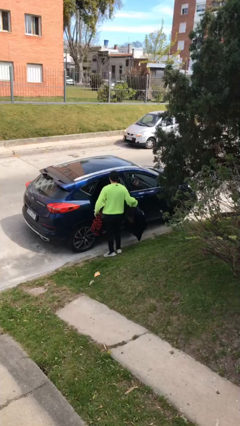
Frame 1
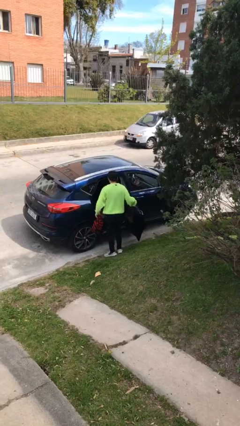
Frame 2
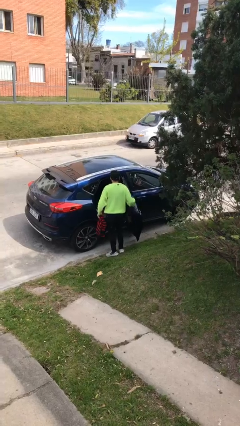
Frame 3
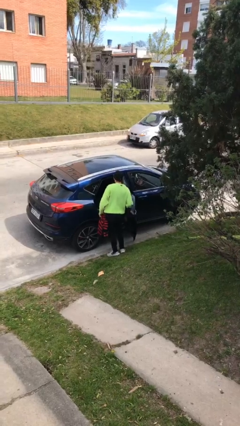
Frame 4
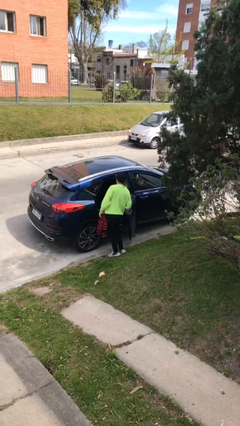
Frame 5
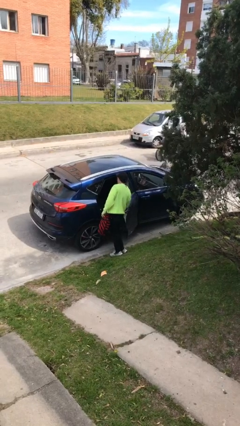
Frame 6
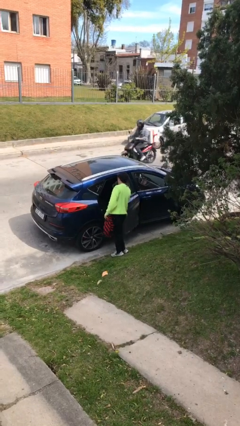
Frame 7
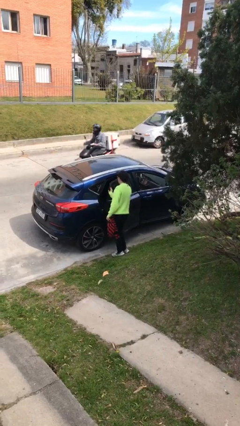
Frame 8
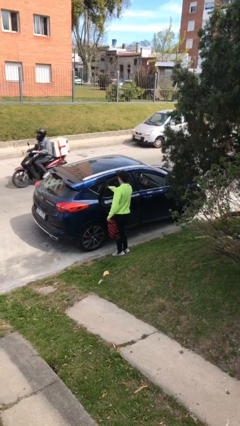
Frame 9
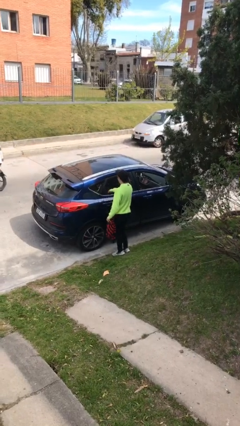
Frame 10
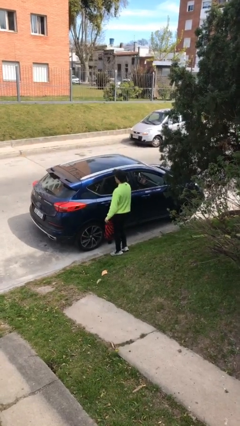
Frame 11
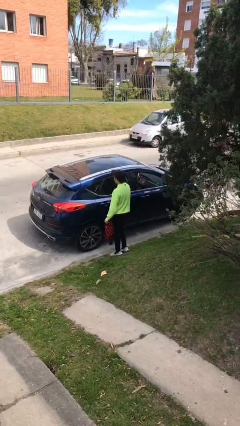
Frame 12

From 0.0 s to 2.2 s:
person closes car door

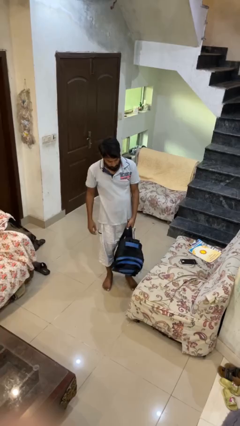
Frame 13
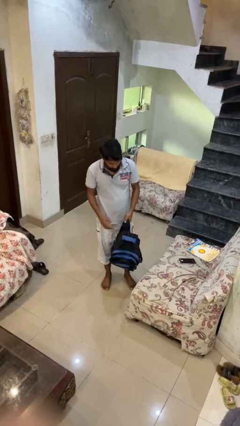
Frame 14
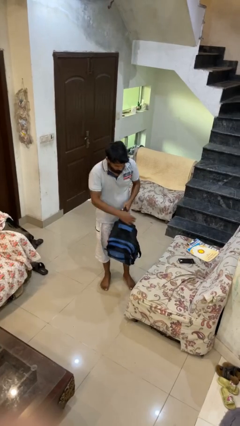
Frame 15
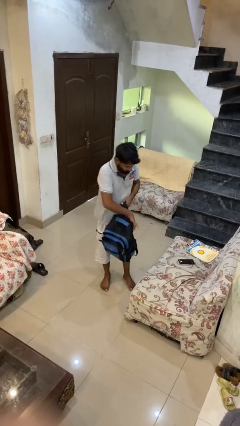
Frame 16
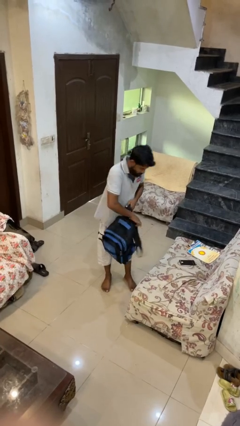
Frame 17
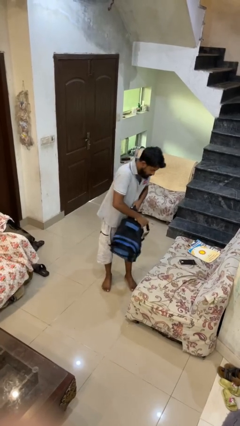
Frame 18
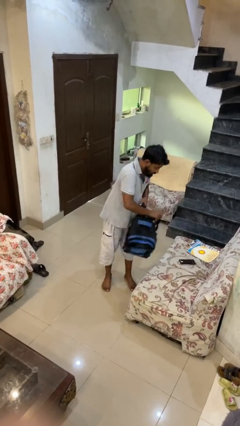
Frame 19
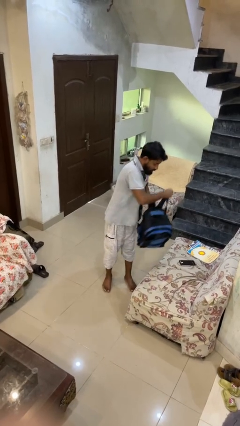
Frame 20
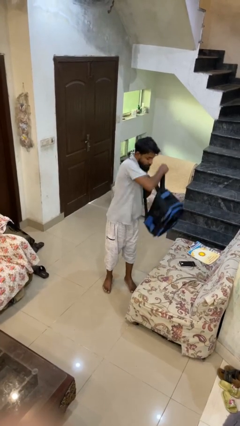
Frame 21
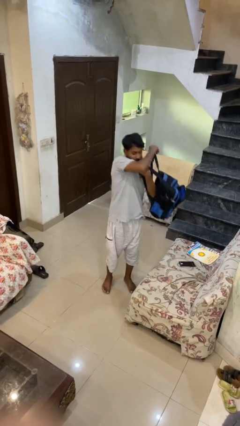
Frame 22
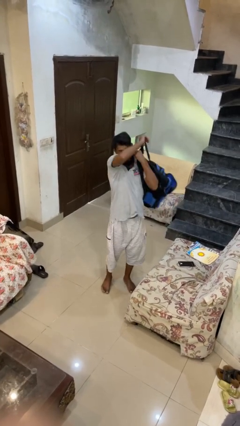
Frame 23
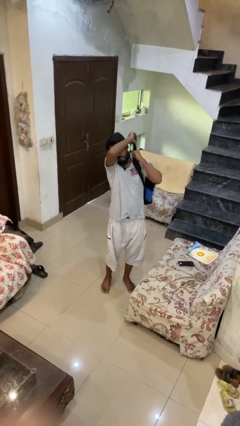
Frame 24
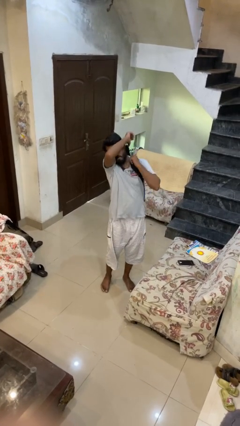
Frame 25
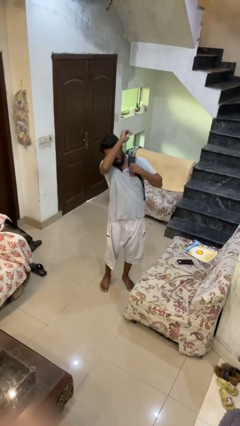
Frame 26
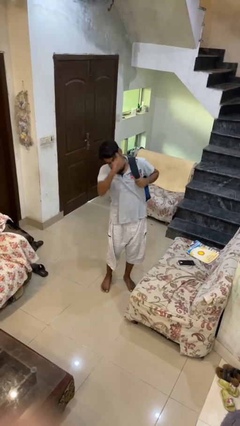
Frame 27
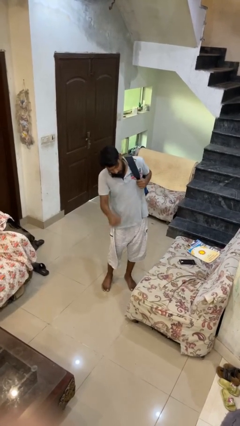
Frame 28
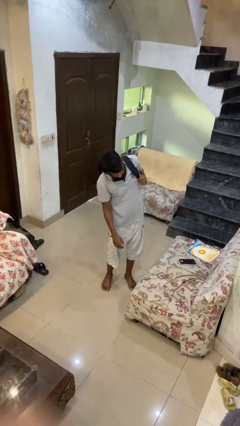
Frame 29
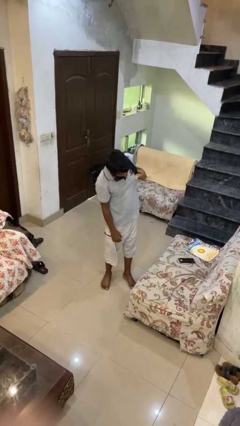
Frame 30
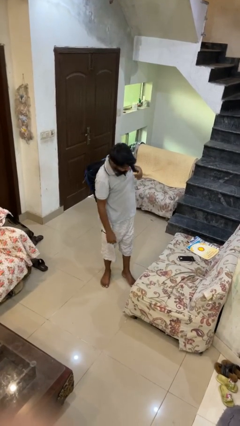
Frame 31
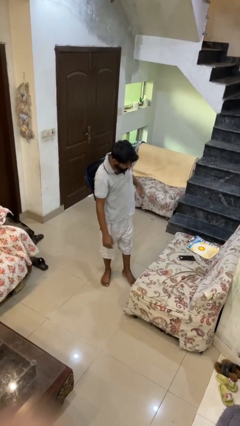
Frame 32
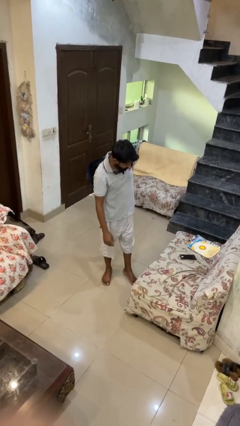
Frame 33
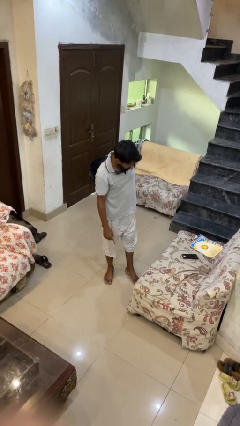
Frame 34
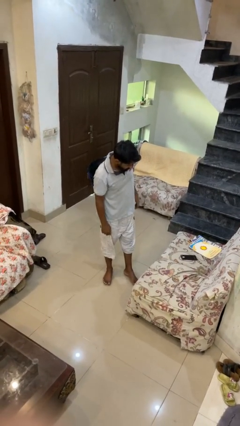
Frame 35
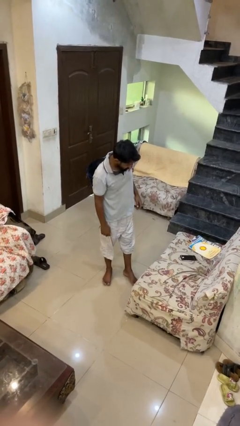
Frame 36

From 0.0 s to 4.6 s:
person puts on backpack

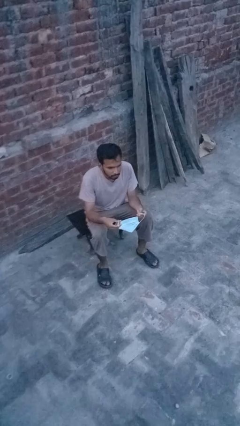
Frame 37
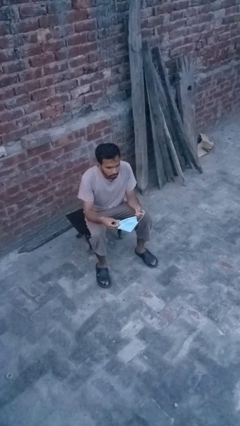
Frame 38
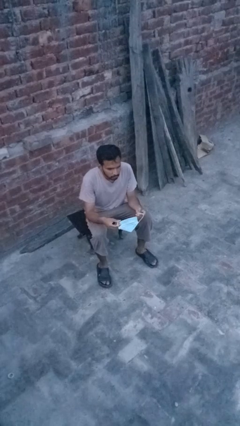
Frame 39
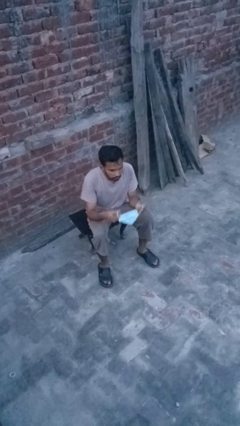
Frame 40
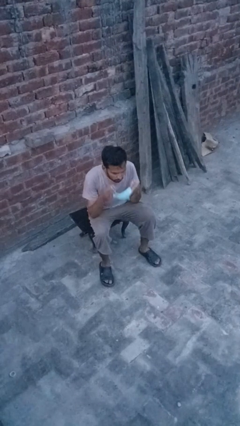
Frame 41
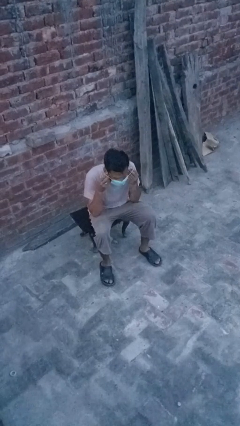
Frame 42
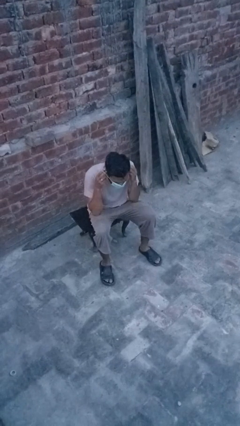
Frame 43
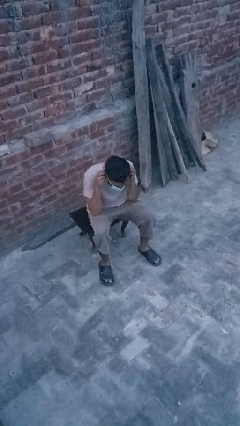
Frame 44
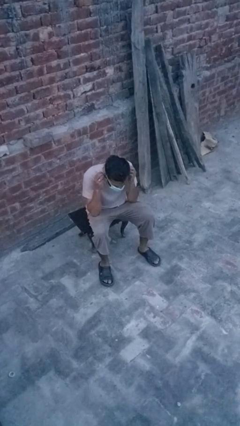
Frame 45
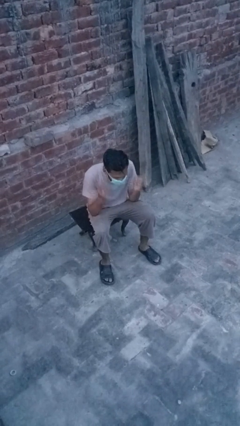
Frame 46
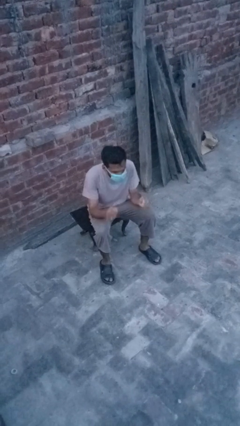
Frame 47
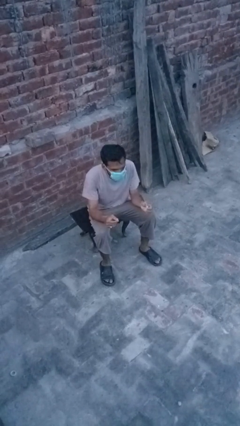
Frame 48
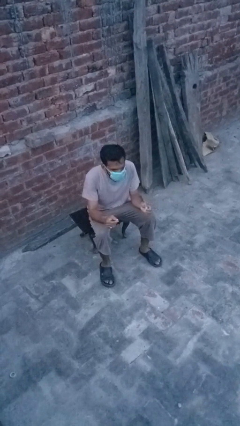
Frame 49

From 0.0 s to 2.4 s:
person puts on facemask

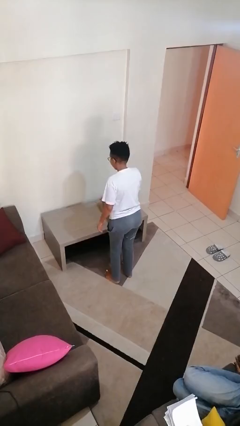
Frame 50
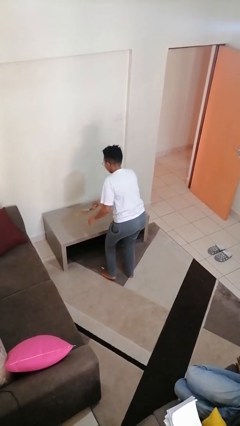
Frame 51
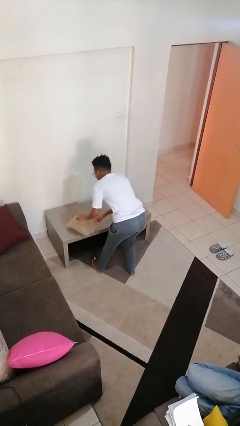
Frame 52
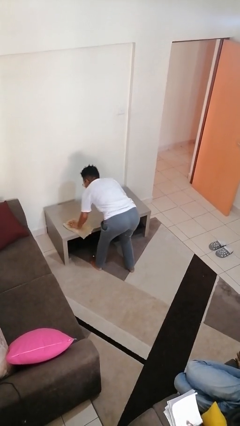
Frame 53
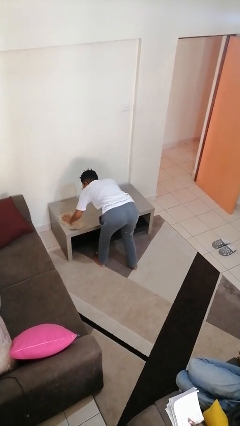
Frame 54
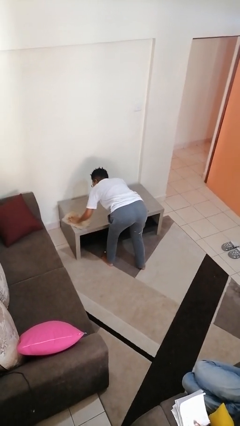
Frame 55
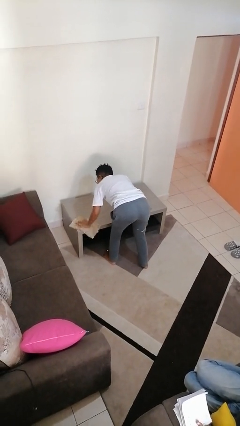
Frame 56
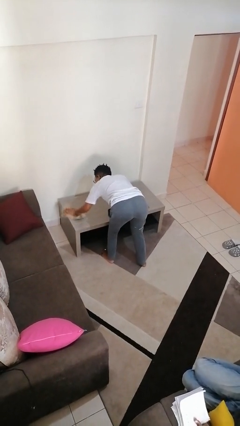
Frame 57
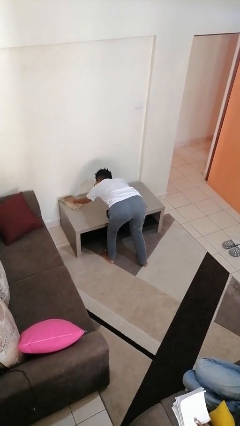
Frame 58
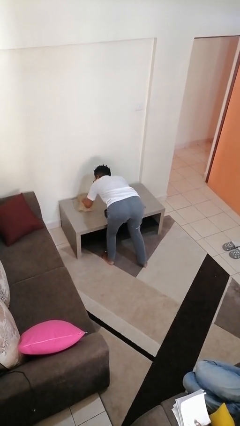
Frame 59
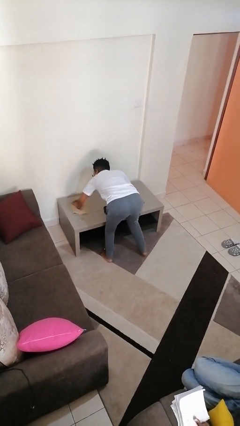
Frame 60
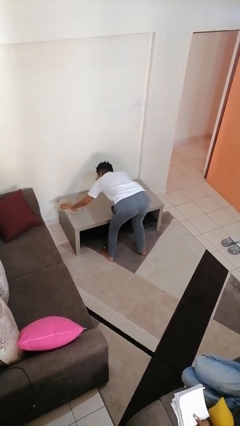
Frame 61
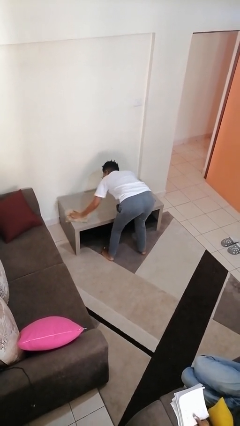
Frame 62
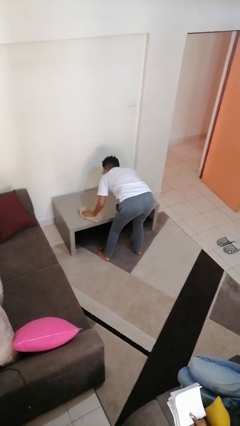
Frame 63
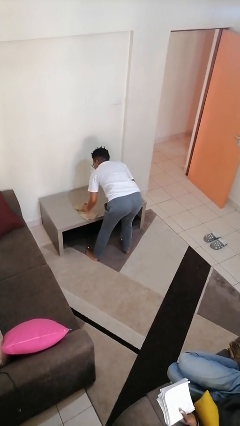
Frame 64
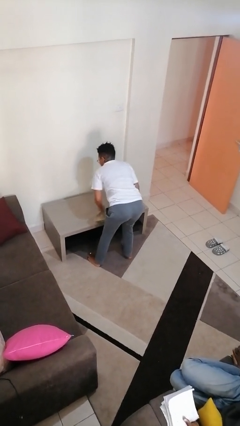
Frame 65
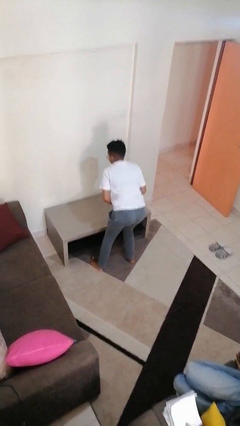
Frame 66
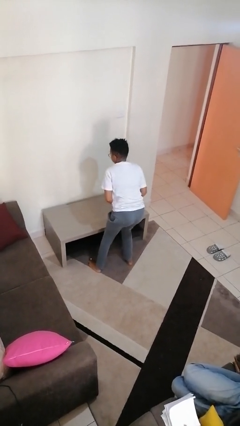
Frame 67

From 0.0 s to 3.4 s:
person cleans table with rag

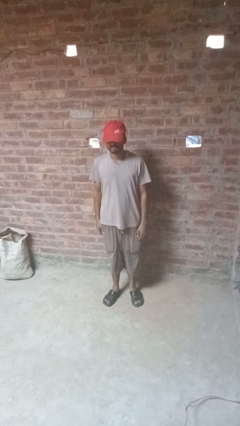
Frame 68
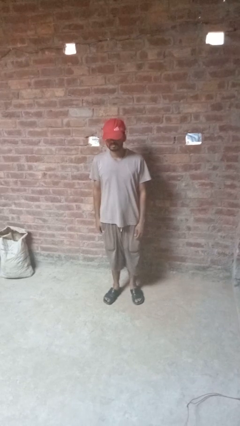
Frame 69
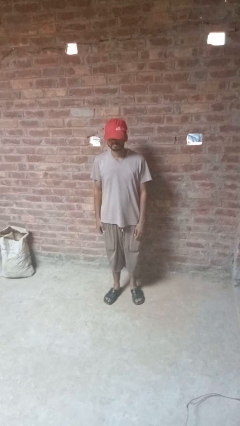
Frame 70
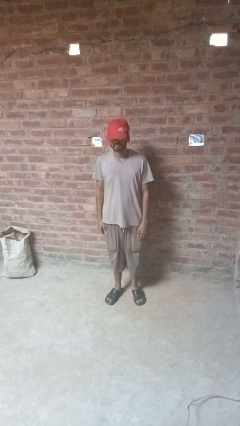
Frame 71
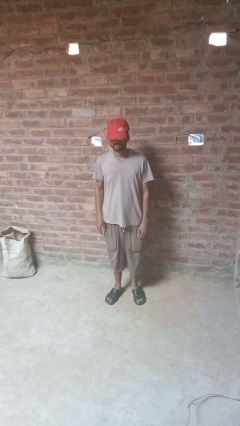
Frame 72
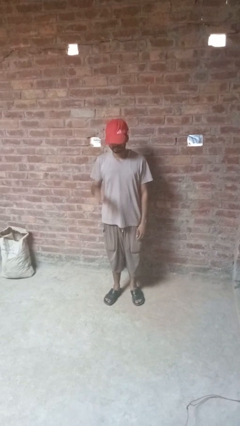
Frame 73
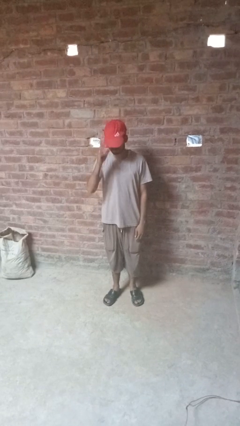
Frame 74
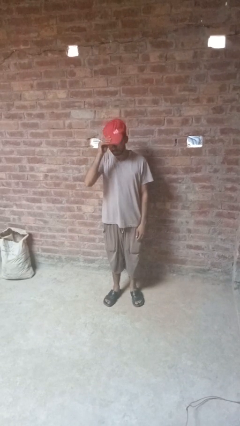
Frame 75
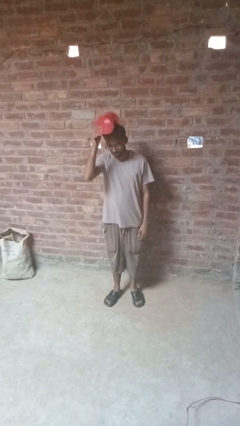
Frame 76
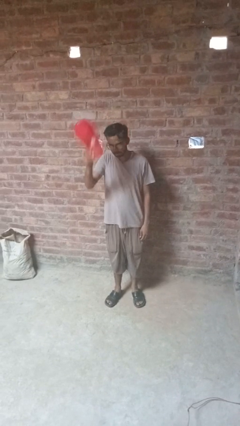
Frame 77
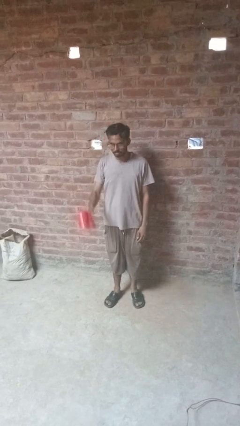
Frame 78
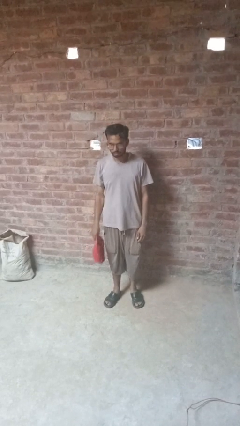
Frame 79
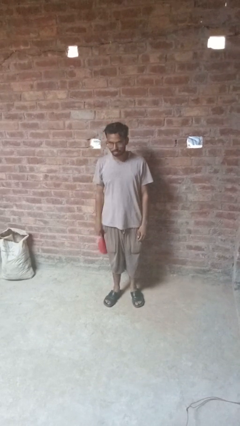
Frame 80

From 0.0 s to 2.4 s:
person takes off hat

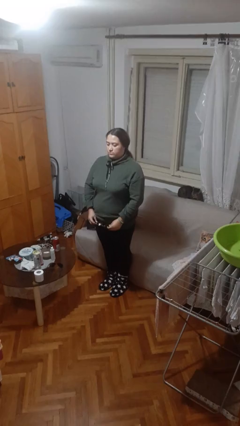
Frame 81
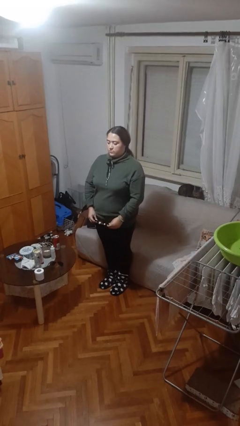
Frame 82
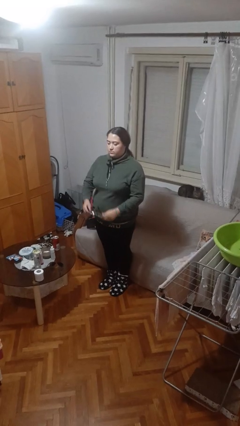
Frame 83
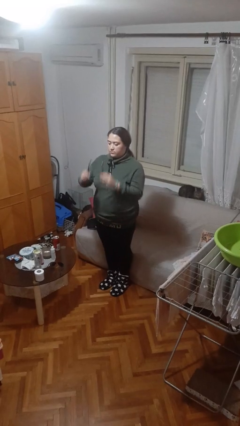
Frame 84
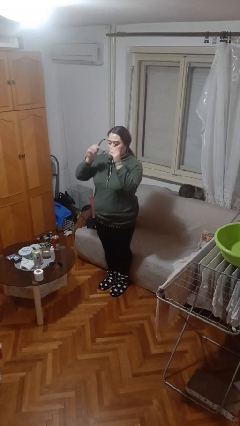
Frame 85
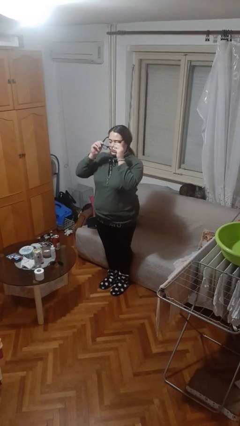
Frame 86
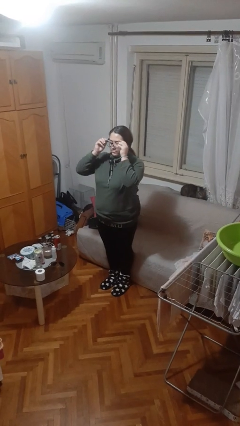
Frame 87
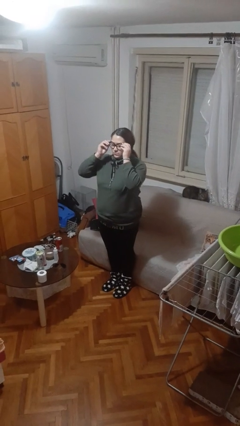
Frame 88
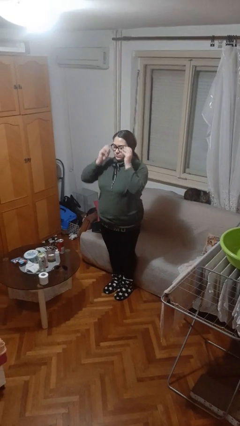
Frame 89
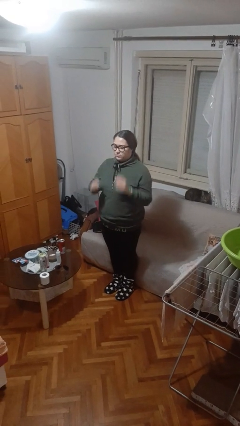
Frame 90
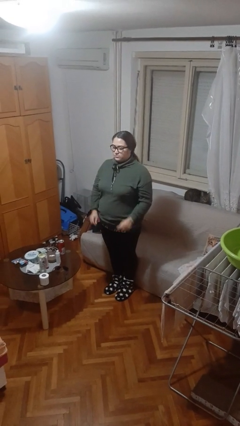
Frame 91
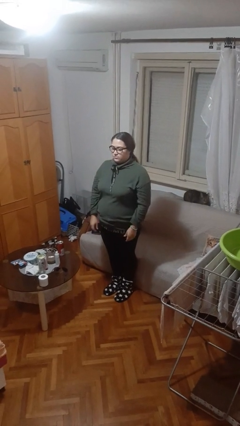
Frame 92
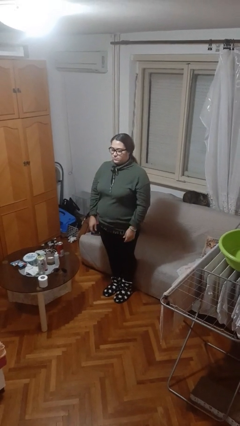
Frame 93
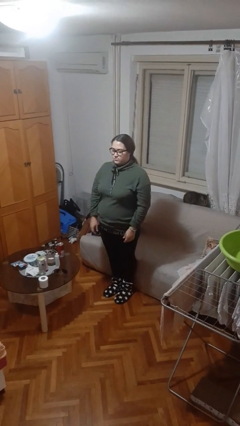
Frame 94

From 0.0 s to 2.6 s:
person puts on glasses
